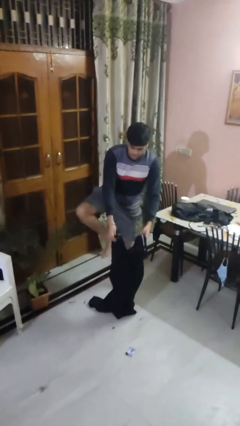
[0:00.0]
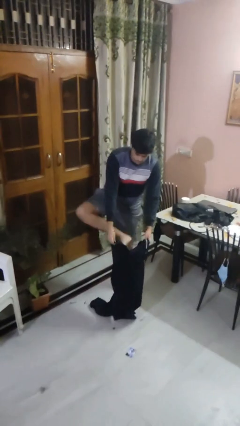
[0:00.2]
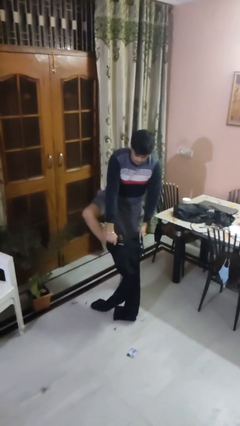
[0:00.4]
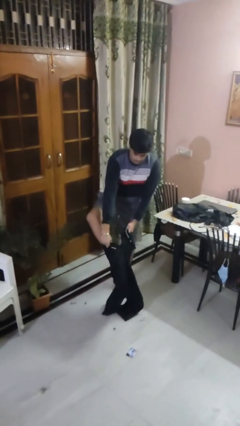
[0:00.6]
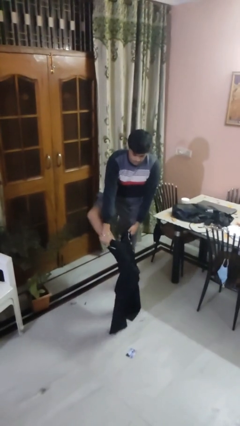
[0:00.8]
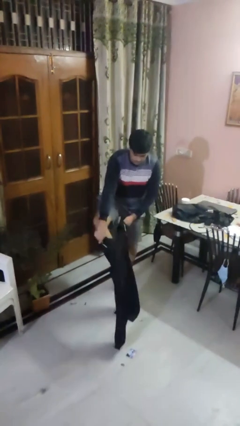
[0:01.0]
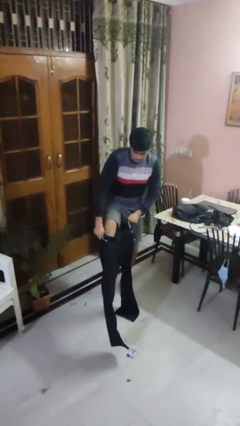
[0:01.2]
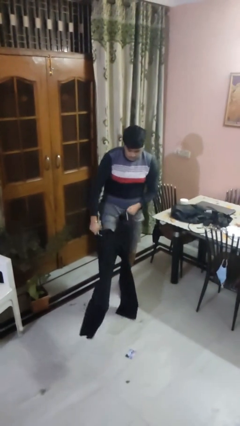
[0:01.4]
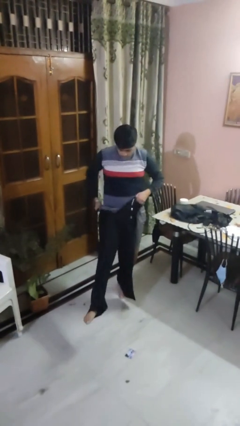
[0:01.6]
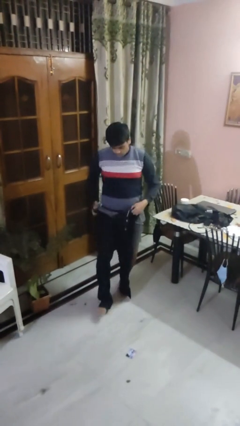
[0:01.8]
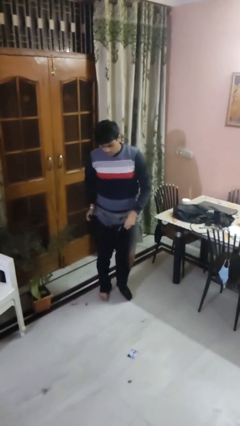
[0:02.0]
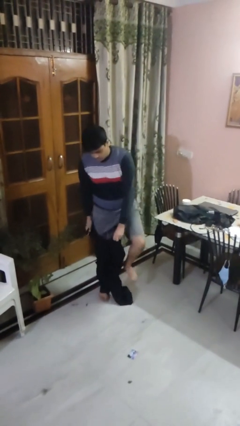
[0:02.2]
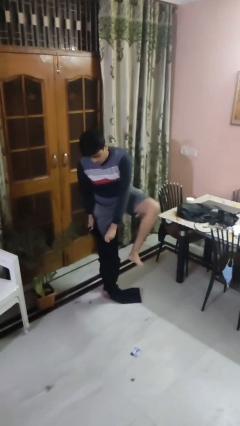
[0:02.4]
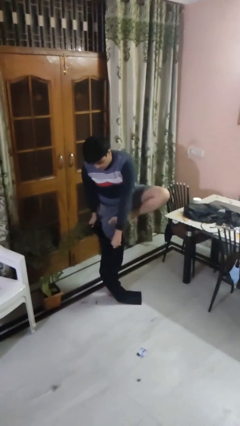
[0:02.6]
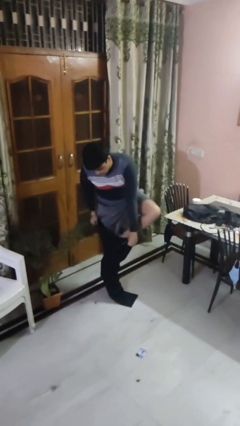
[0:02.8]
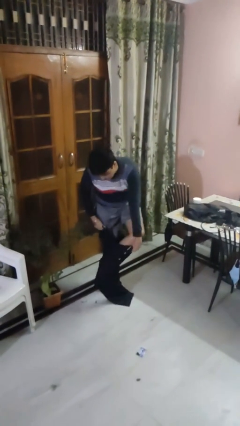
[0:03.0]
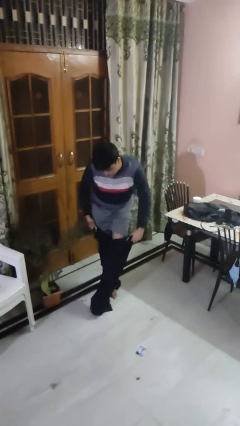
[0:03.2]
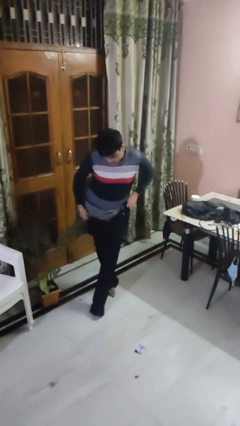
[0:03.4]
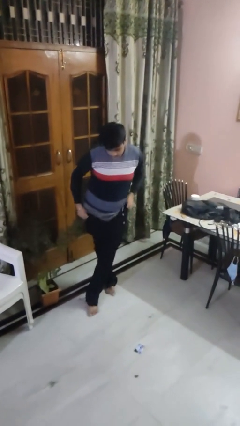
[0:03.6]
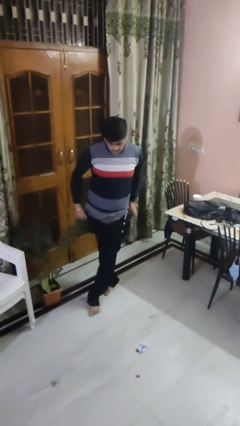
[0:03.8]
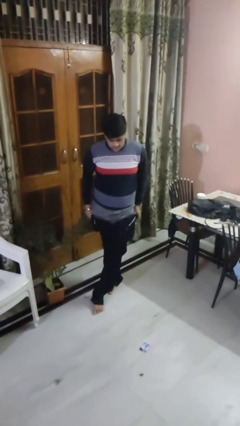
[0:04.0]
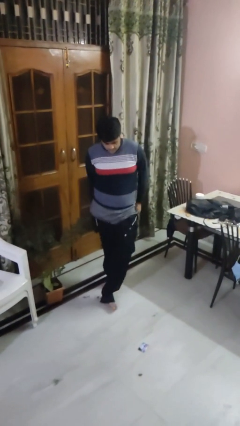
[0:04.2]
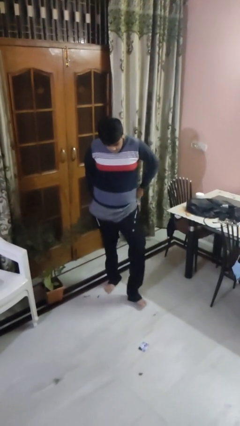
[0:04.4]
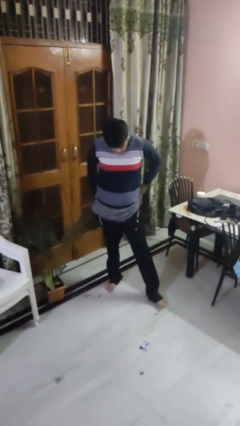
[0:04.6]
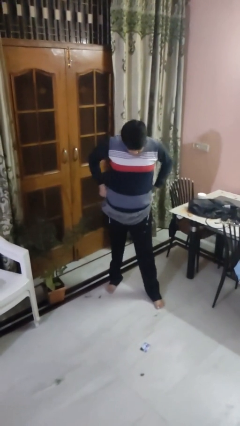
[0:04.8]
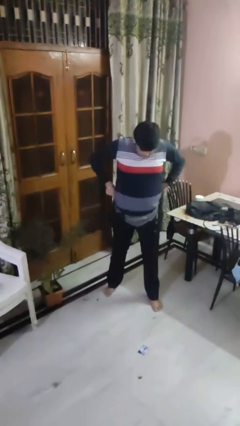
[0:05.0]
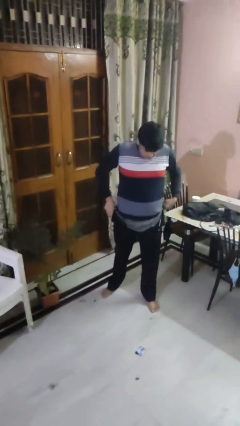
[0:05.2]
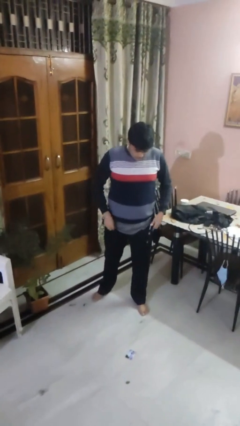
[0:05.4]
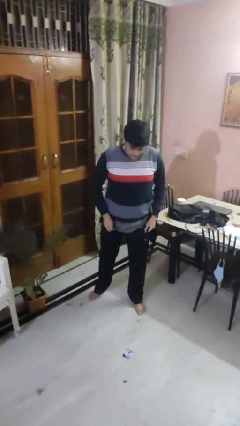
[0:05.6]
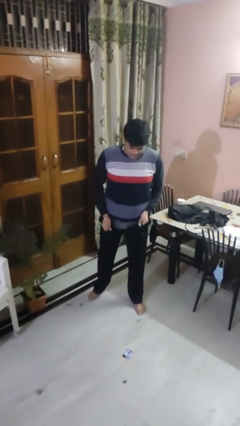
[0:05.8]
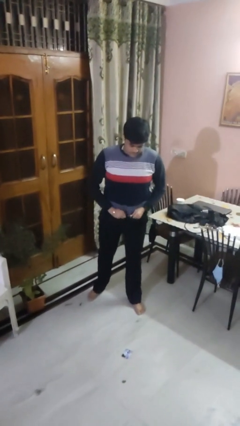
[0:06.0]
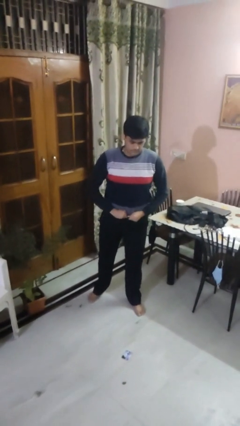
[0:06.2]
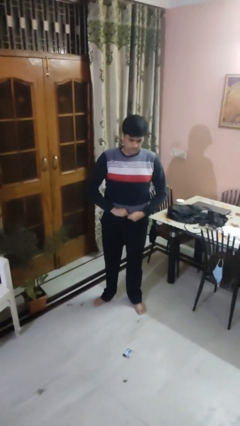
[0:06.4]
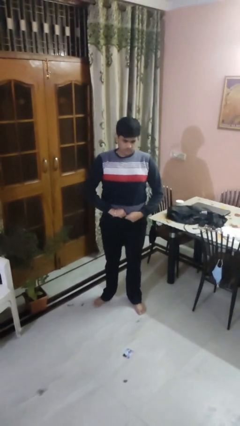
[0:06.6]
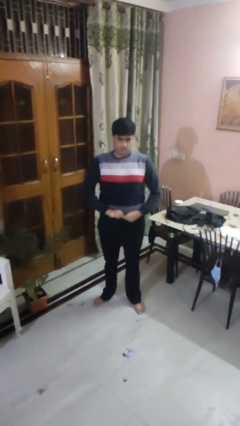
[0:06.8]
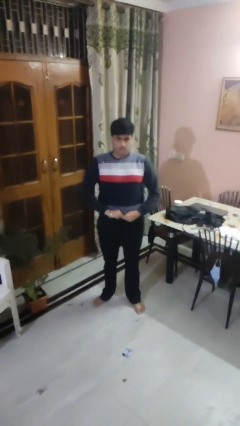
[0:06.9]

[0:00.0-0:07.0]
person puts on pants

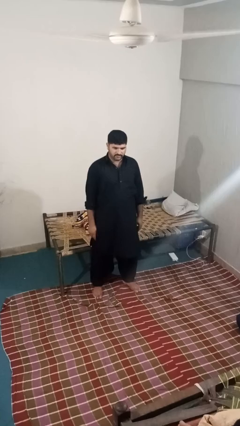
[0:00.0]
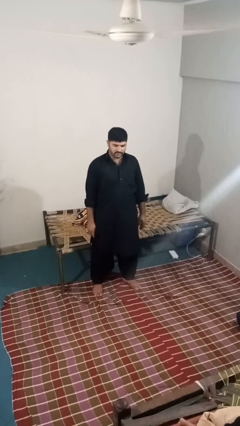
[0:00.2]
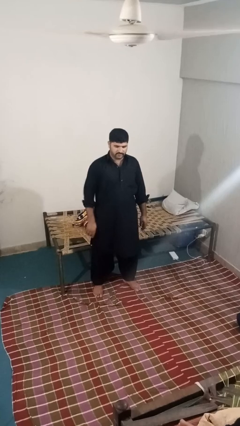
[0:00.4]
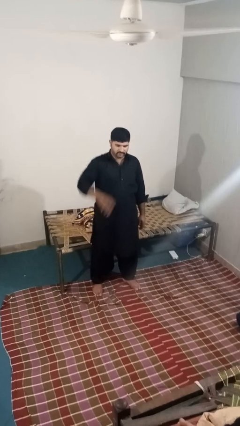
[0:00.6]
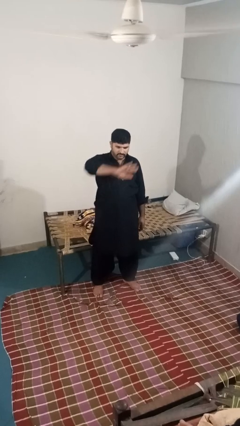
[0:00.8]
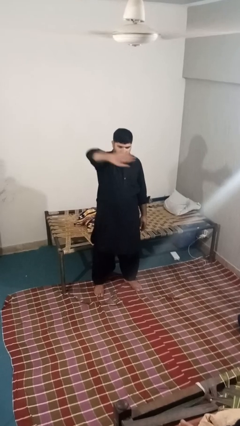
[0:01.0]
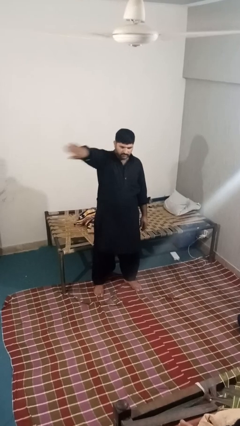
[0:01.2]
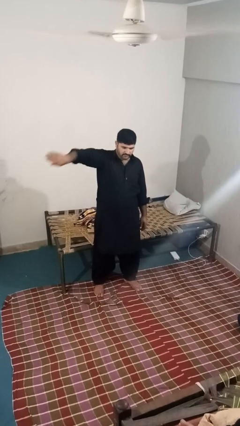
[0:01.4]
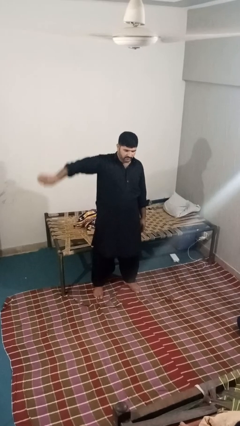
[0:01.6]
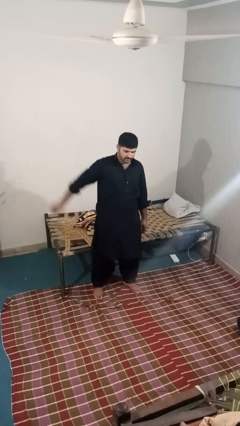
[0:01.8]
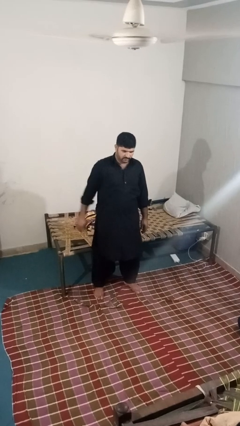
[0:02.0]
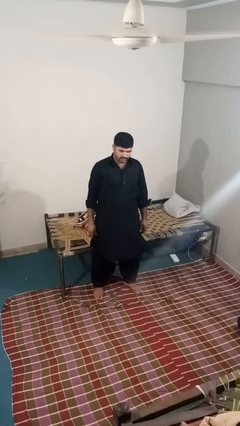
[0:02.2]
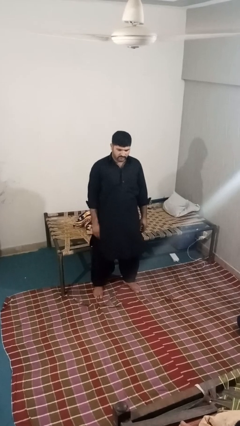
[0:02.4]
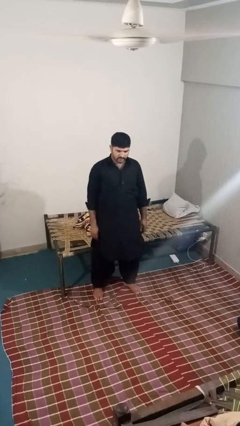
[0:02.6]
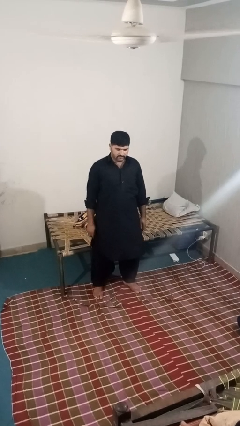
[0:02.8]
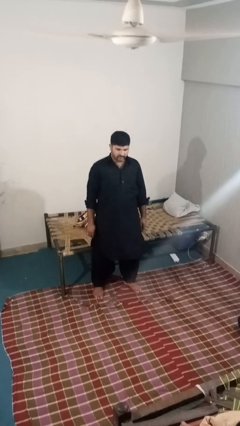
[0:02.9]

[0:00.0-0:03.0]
person gestures swipe right

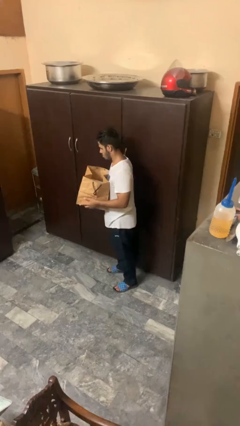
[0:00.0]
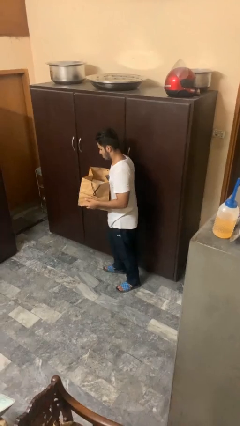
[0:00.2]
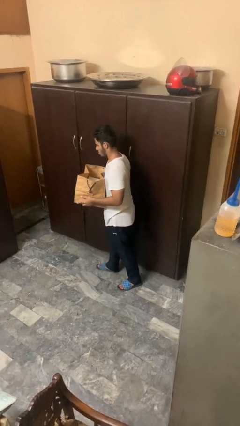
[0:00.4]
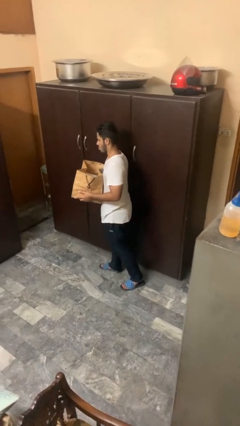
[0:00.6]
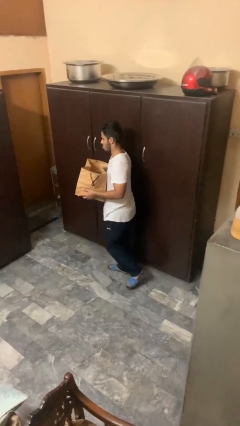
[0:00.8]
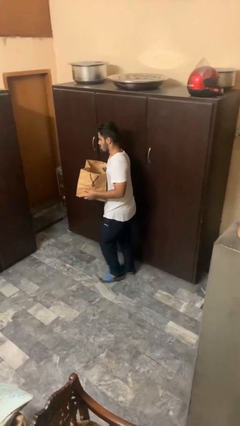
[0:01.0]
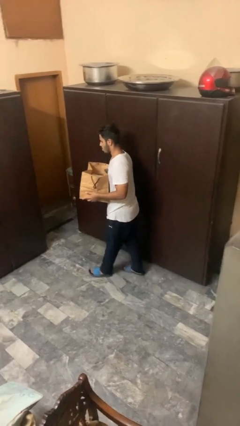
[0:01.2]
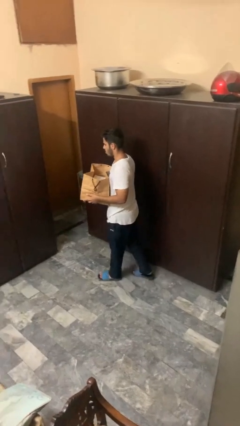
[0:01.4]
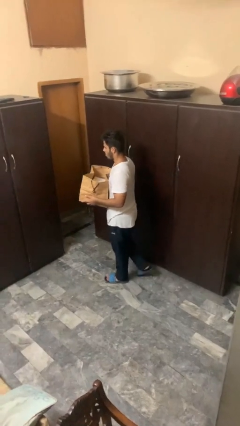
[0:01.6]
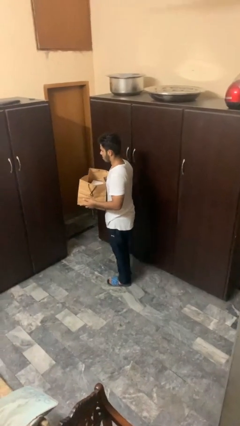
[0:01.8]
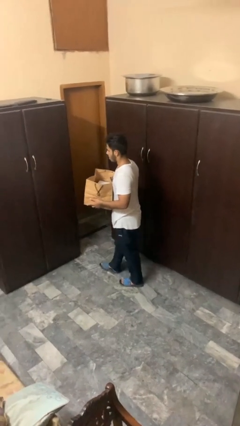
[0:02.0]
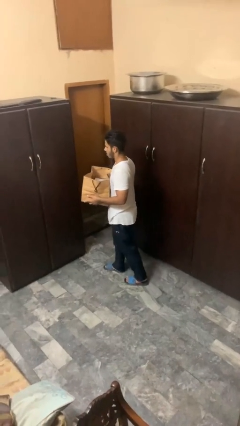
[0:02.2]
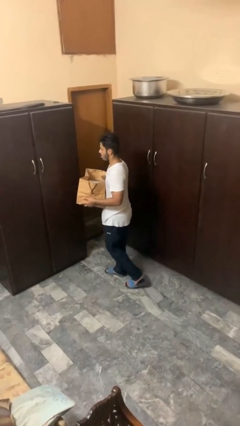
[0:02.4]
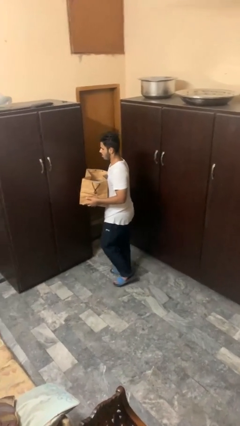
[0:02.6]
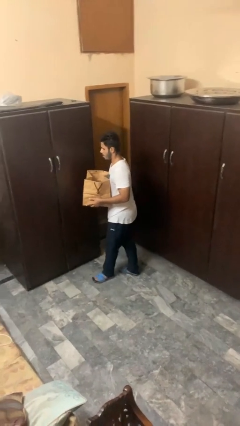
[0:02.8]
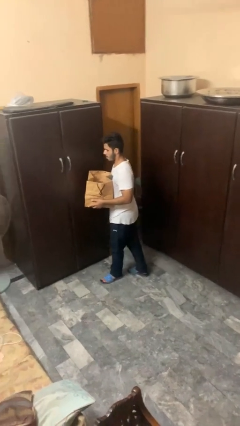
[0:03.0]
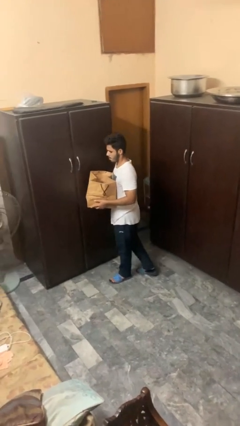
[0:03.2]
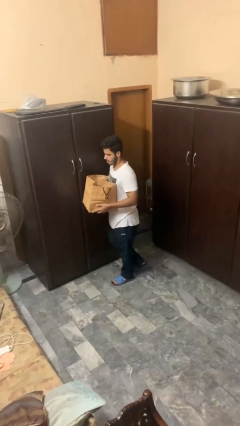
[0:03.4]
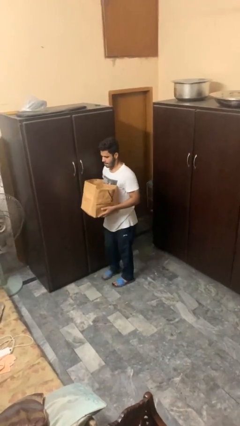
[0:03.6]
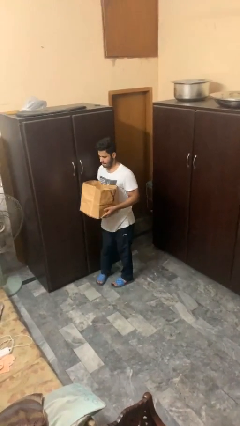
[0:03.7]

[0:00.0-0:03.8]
person carries groceries

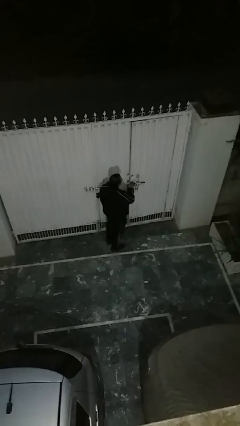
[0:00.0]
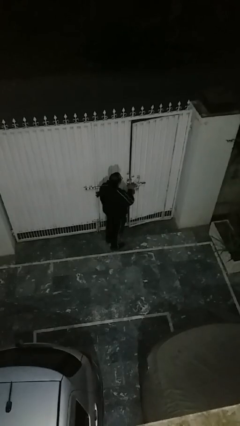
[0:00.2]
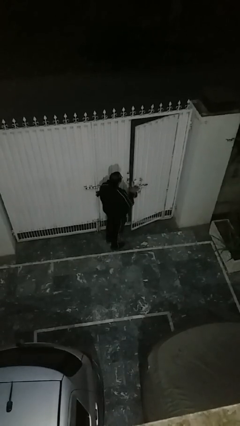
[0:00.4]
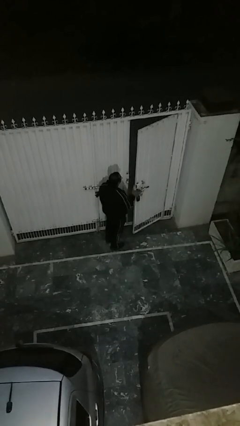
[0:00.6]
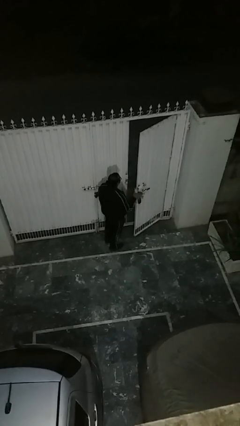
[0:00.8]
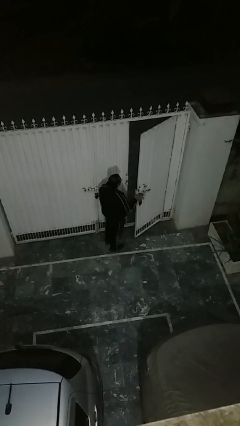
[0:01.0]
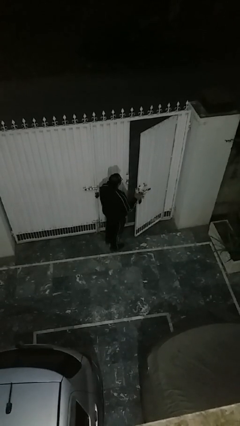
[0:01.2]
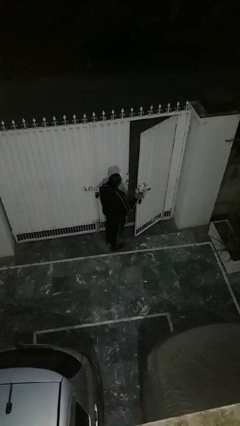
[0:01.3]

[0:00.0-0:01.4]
person opens facility door

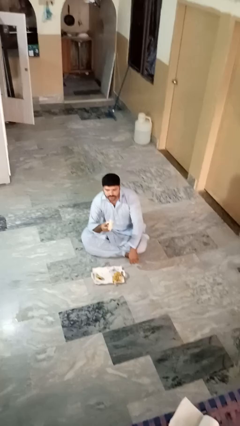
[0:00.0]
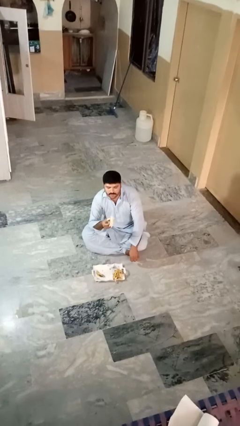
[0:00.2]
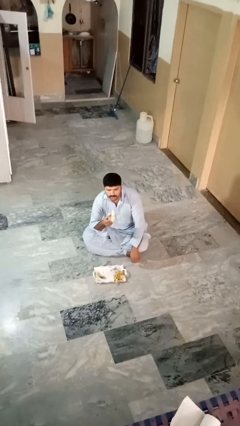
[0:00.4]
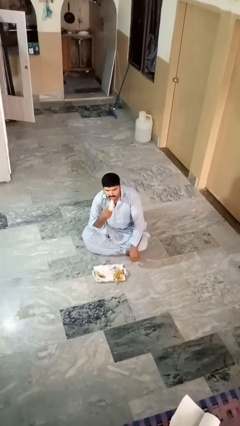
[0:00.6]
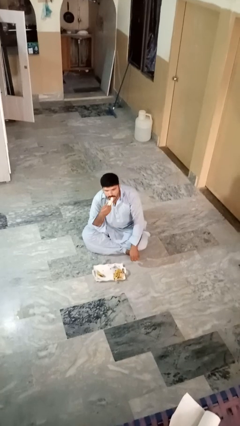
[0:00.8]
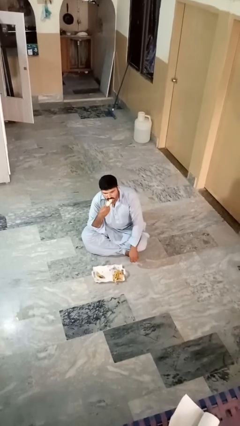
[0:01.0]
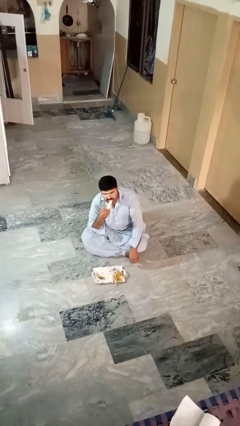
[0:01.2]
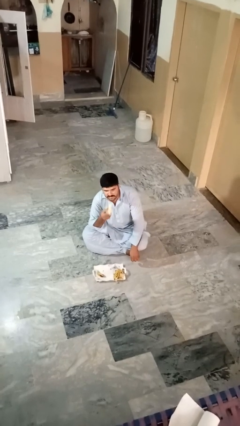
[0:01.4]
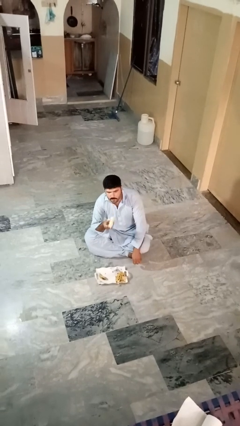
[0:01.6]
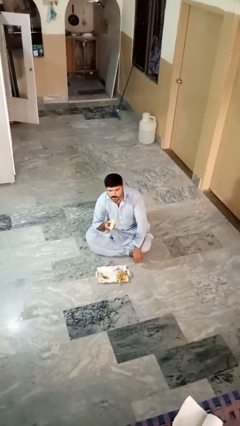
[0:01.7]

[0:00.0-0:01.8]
person eats banana
